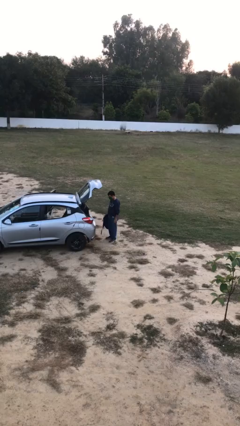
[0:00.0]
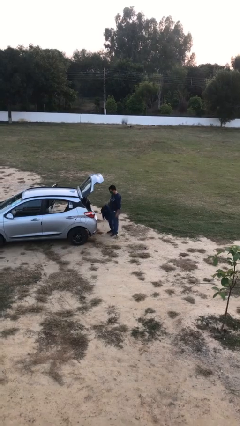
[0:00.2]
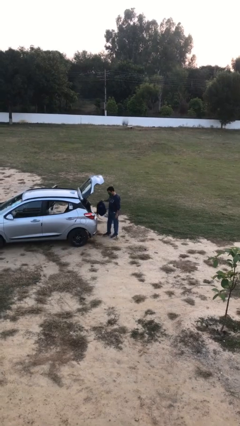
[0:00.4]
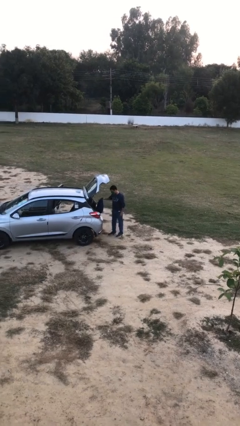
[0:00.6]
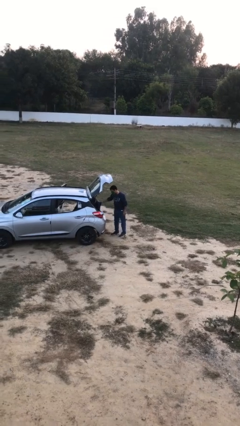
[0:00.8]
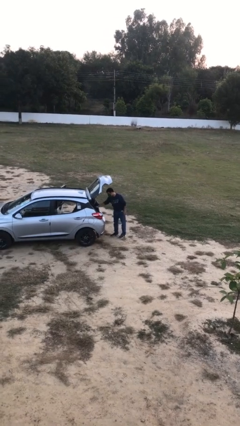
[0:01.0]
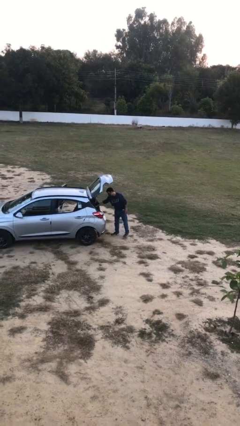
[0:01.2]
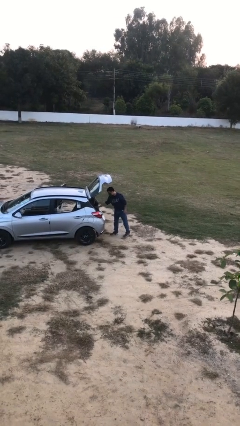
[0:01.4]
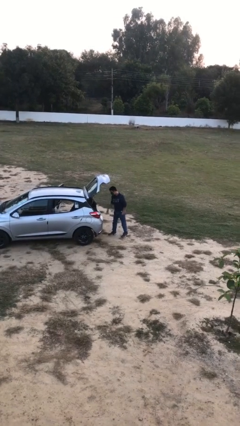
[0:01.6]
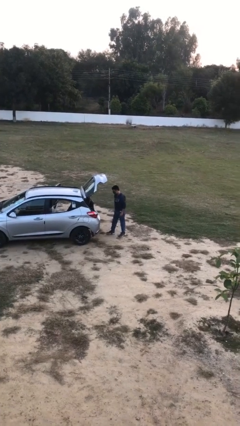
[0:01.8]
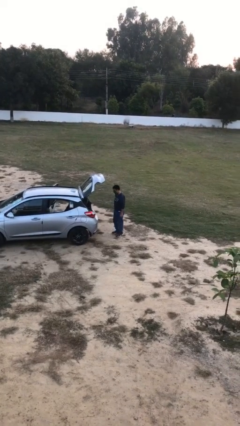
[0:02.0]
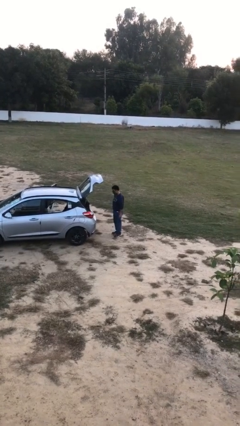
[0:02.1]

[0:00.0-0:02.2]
person loads car

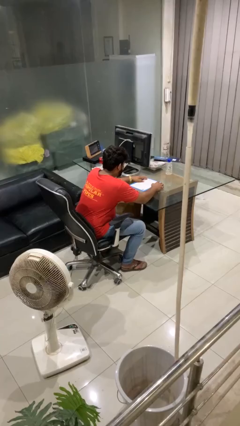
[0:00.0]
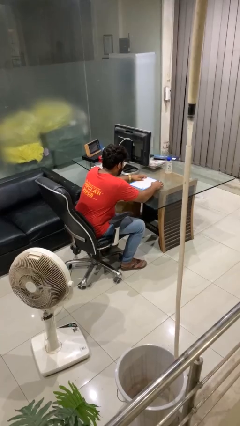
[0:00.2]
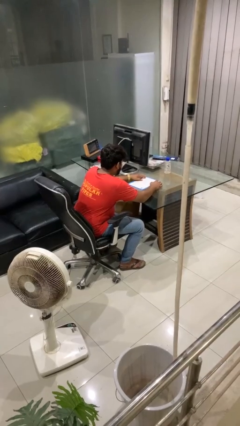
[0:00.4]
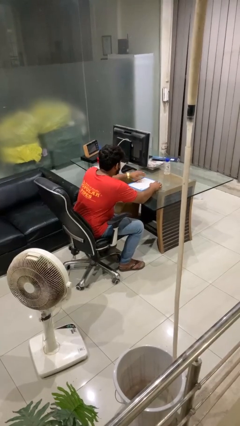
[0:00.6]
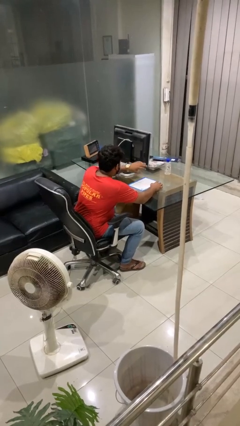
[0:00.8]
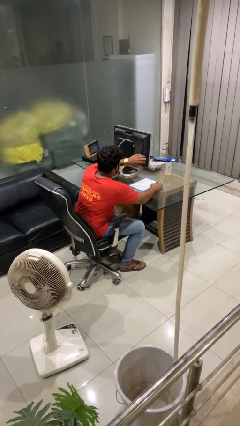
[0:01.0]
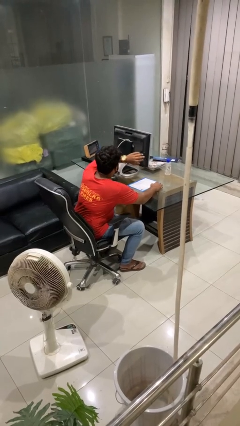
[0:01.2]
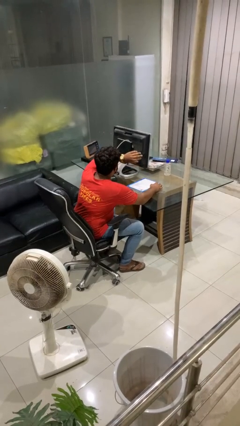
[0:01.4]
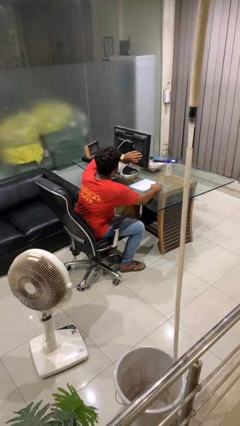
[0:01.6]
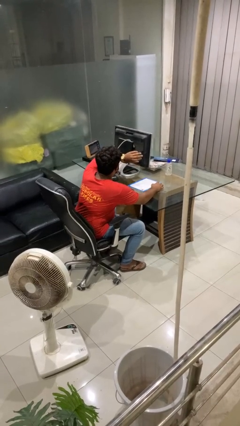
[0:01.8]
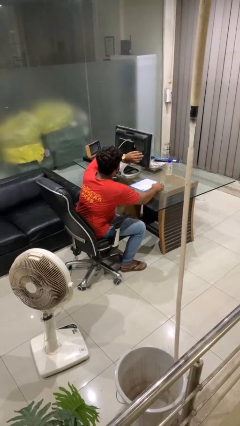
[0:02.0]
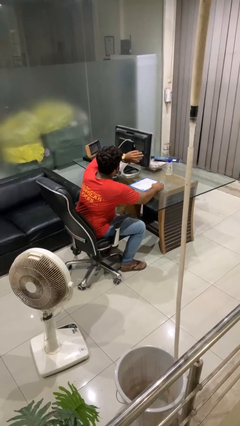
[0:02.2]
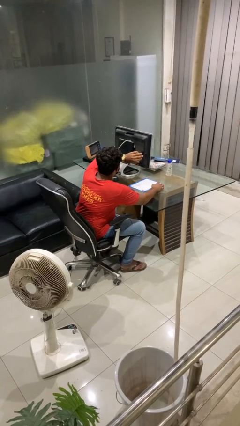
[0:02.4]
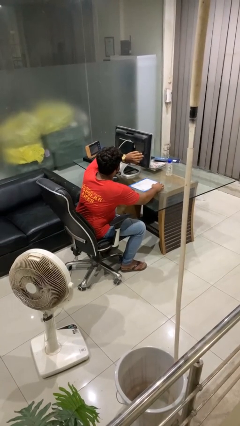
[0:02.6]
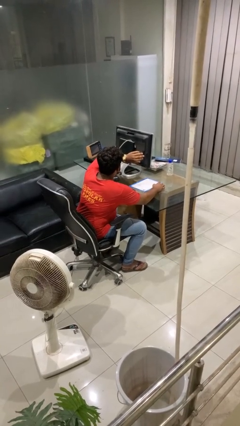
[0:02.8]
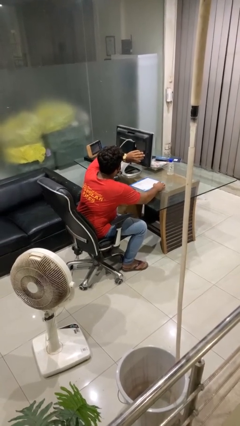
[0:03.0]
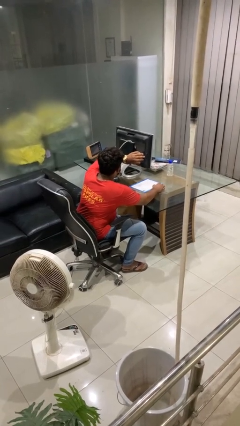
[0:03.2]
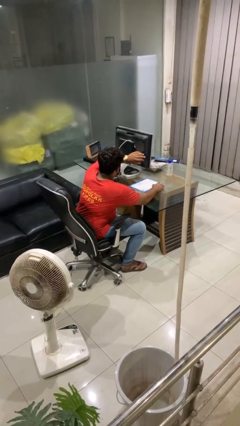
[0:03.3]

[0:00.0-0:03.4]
person looks at wristwatch

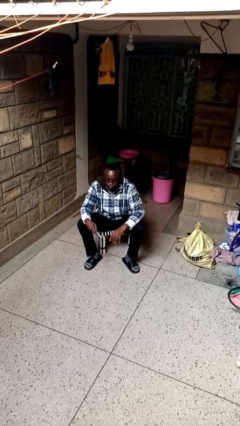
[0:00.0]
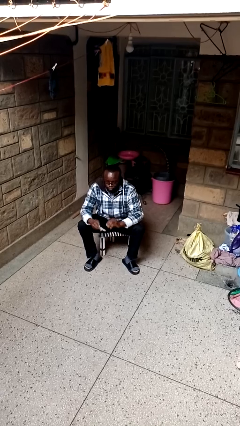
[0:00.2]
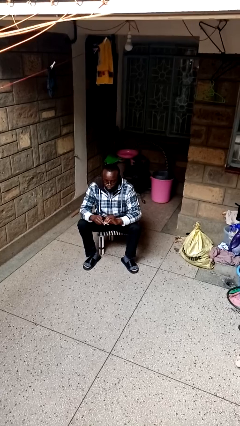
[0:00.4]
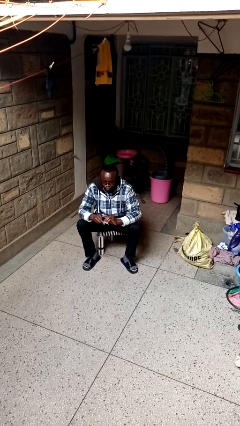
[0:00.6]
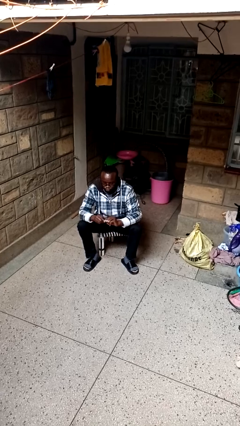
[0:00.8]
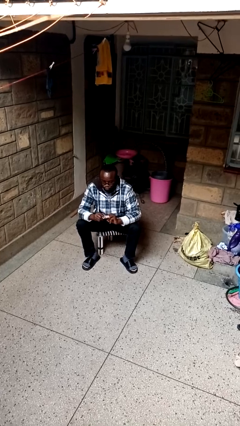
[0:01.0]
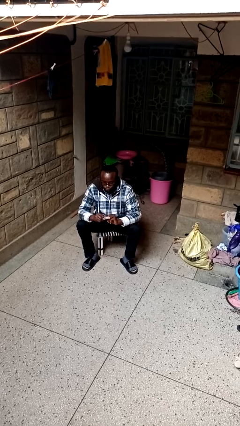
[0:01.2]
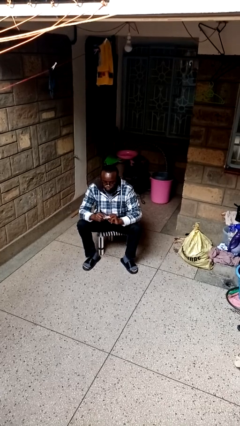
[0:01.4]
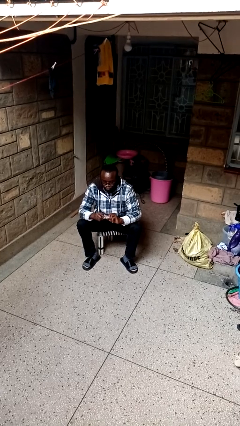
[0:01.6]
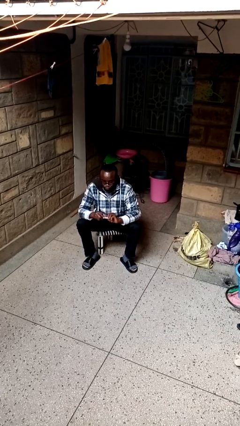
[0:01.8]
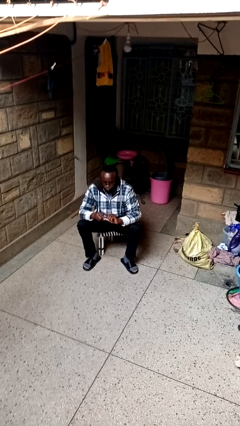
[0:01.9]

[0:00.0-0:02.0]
person files fingernails

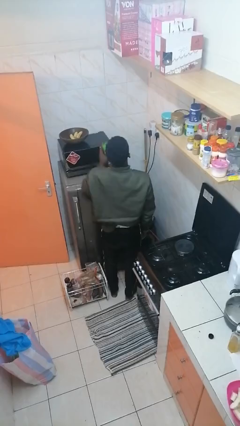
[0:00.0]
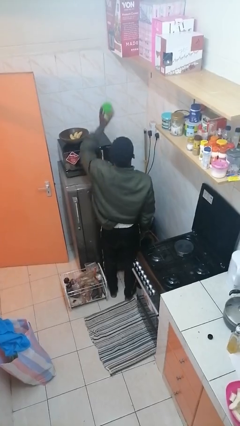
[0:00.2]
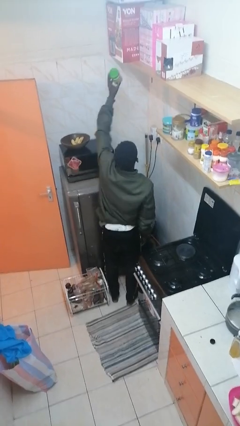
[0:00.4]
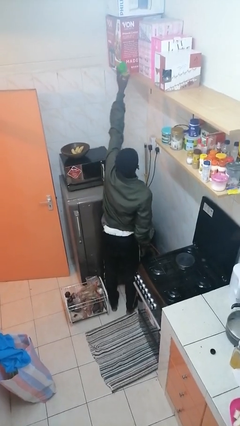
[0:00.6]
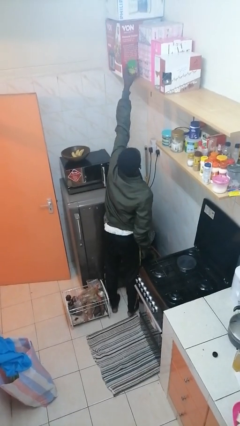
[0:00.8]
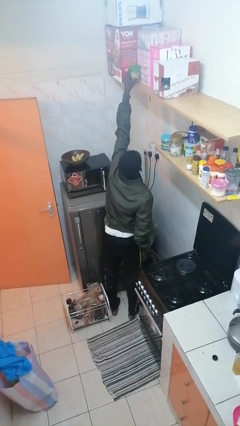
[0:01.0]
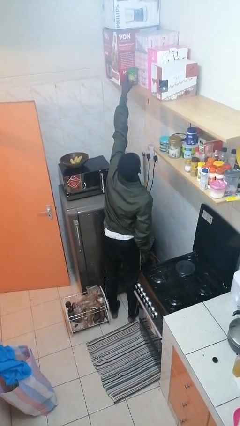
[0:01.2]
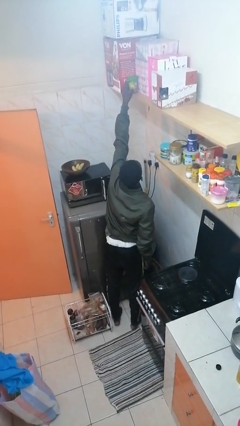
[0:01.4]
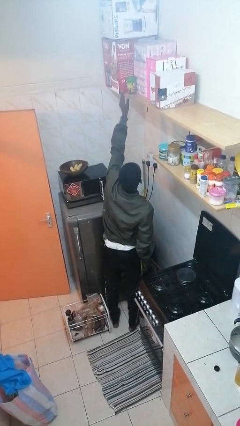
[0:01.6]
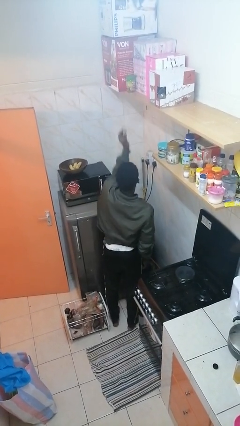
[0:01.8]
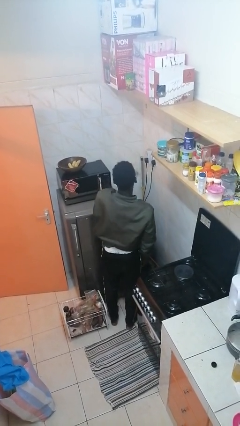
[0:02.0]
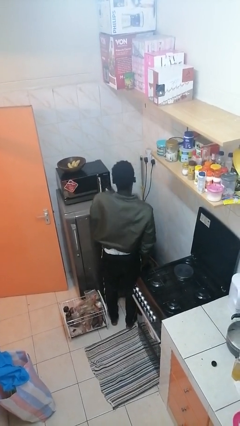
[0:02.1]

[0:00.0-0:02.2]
person puts down object on shelf

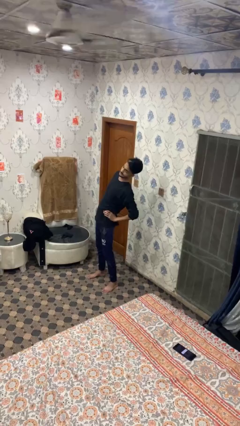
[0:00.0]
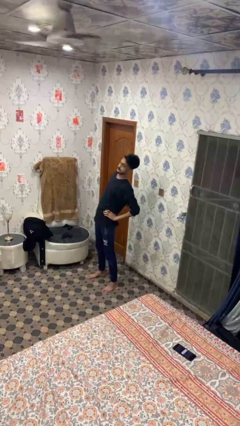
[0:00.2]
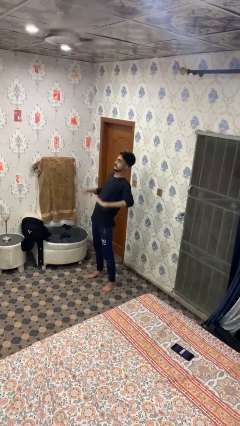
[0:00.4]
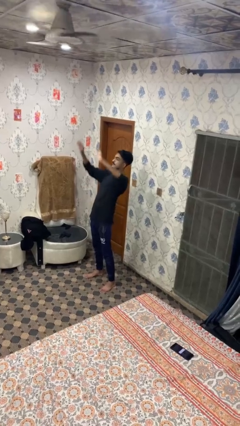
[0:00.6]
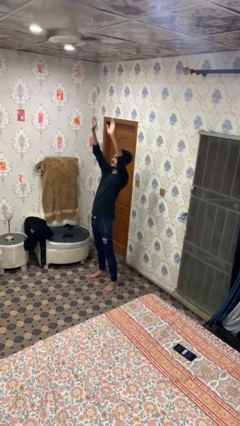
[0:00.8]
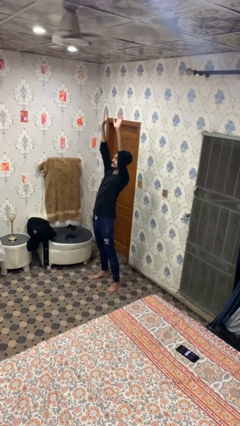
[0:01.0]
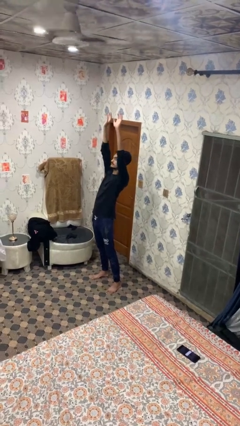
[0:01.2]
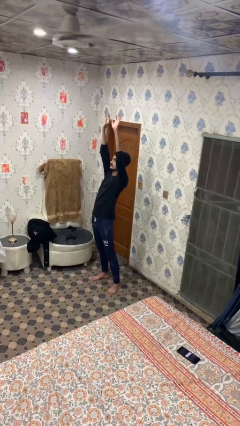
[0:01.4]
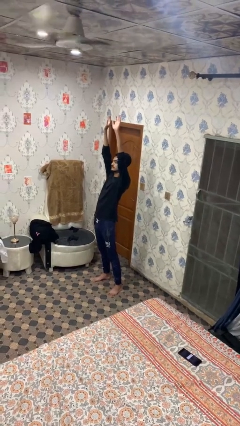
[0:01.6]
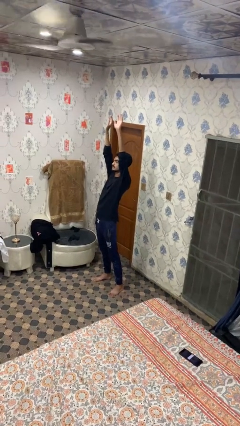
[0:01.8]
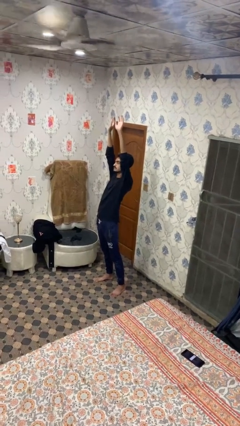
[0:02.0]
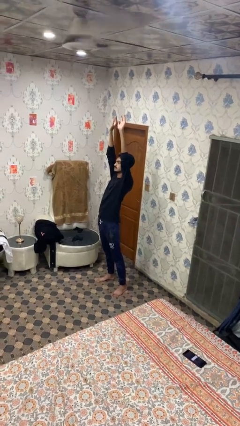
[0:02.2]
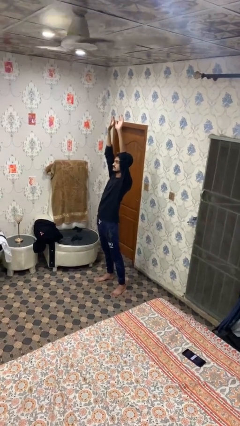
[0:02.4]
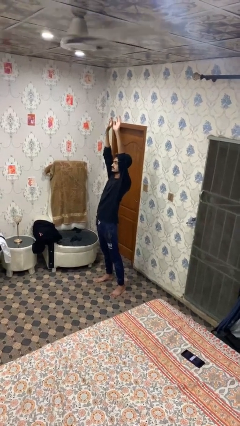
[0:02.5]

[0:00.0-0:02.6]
person stretches arms over head

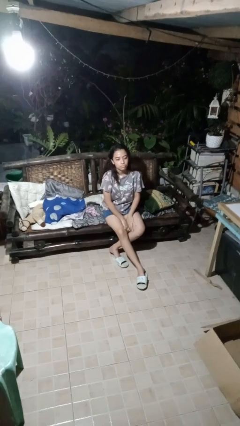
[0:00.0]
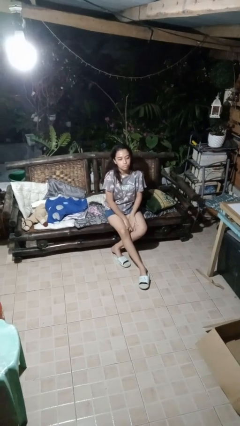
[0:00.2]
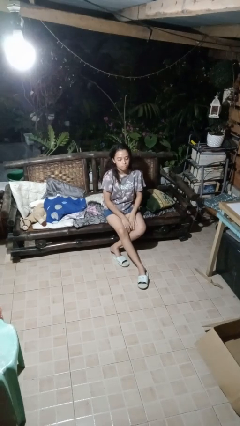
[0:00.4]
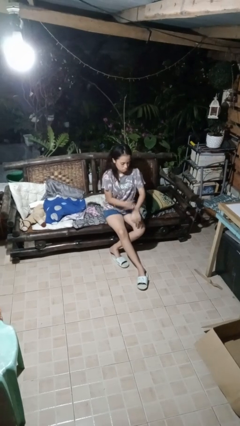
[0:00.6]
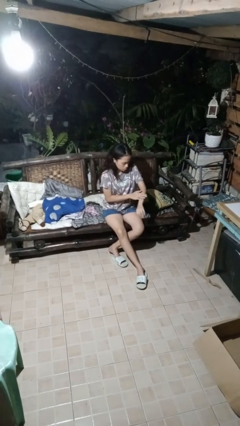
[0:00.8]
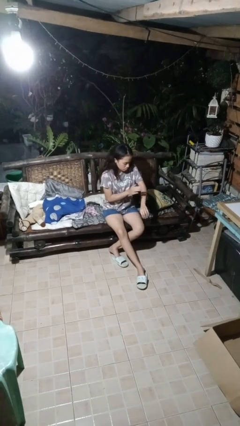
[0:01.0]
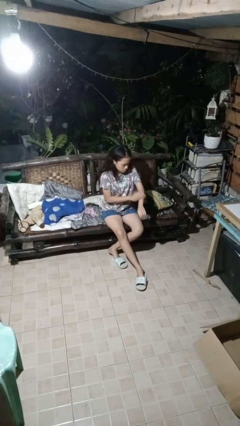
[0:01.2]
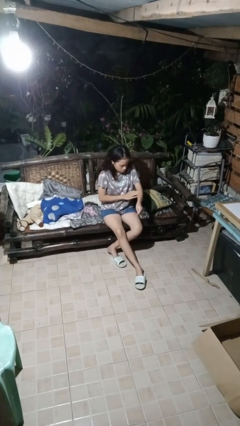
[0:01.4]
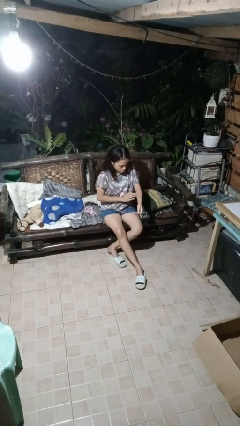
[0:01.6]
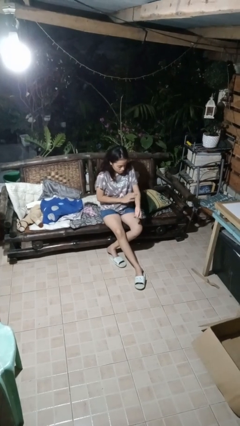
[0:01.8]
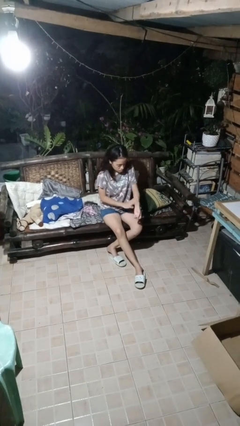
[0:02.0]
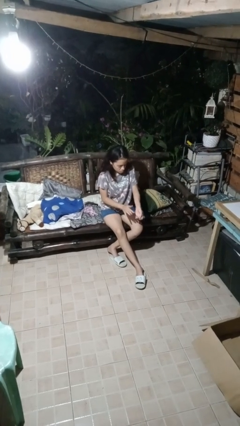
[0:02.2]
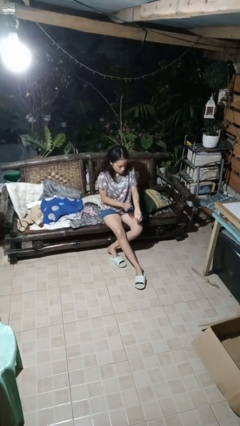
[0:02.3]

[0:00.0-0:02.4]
person swats bug

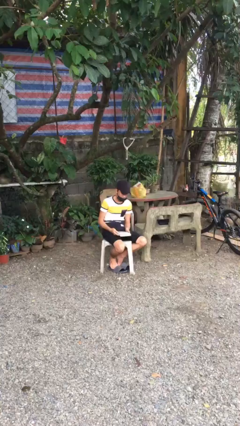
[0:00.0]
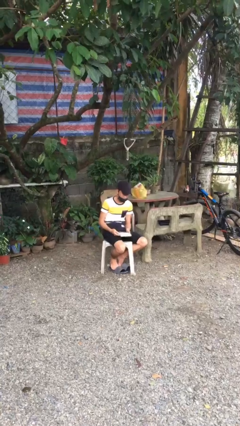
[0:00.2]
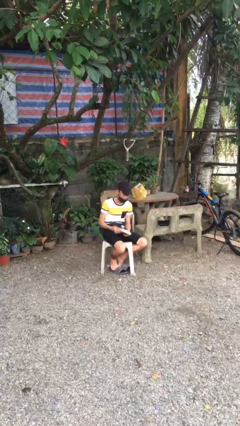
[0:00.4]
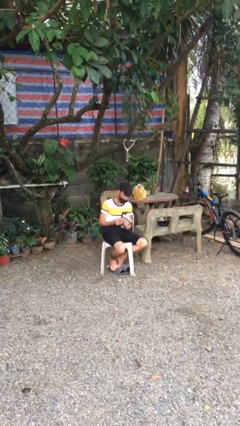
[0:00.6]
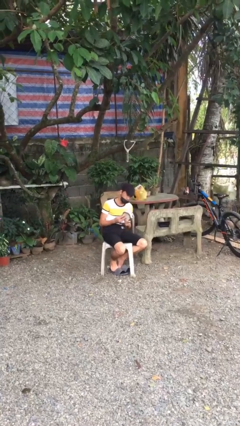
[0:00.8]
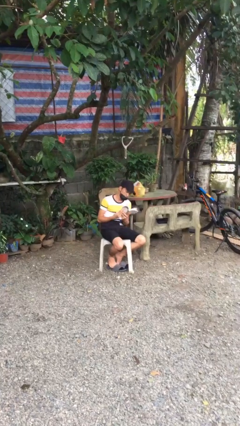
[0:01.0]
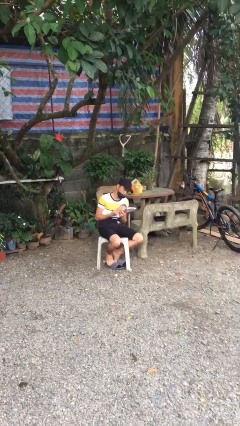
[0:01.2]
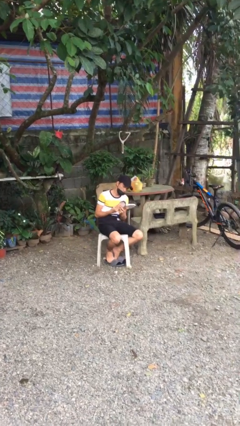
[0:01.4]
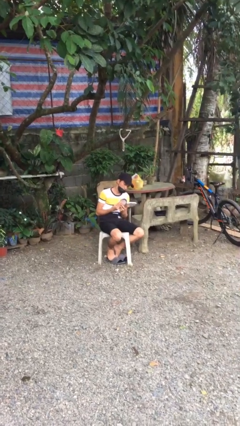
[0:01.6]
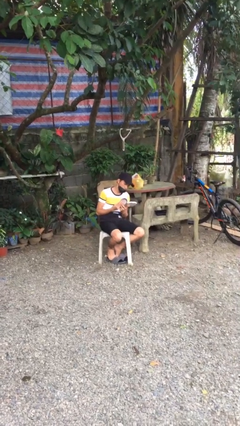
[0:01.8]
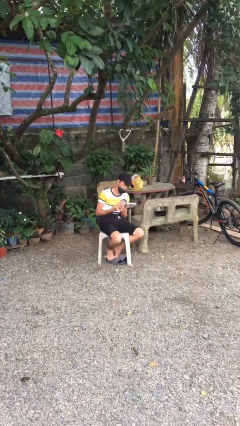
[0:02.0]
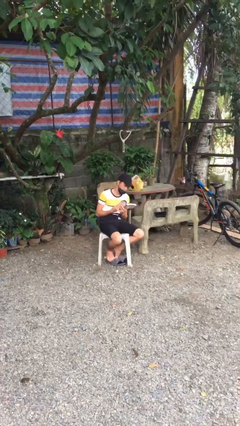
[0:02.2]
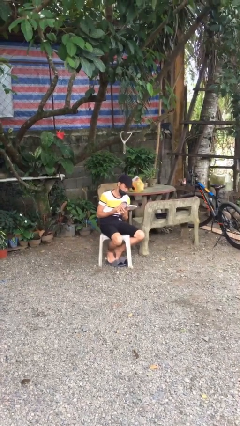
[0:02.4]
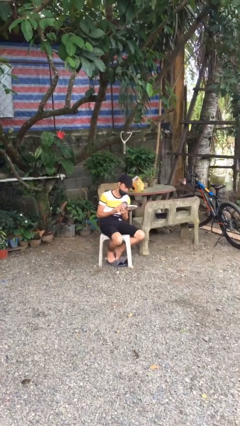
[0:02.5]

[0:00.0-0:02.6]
person reads document
